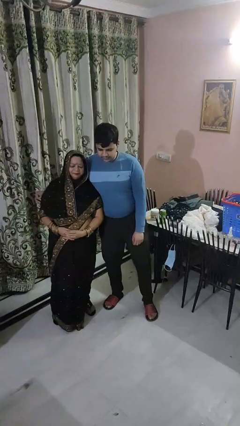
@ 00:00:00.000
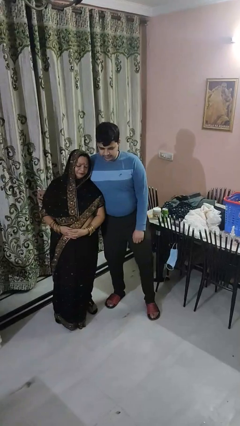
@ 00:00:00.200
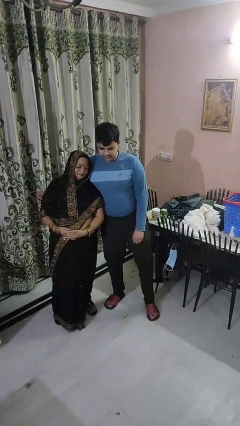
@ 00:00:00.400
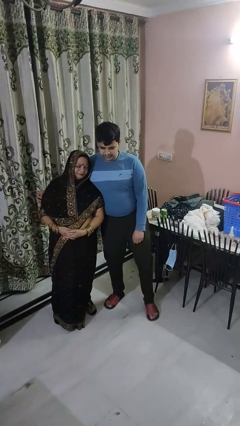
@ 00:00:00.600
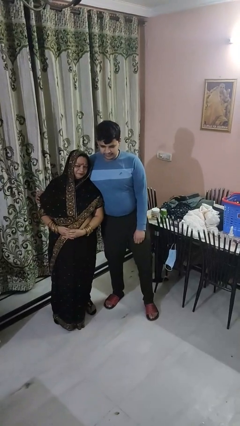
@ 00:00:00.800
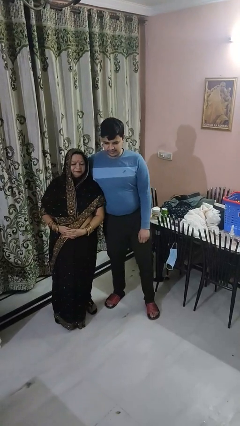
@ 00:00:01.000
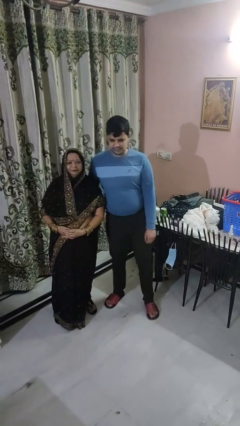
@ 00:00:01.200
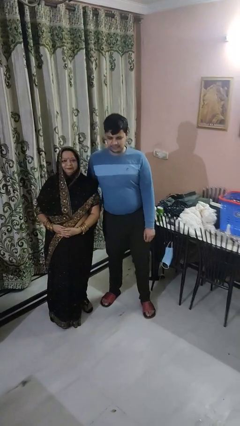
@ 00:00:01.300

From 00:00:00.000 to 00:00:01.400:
person hugs person from side

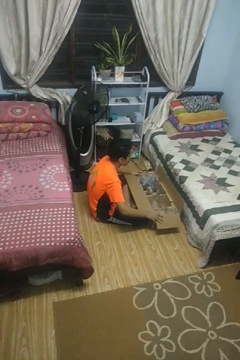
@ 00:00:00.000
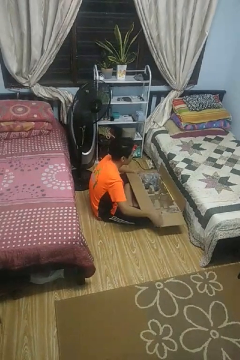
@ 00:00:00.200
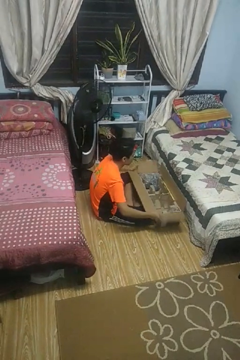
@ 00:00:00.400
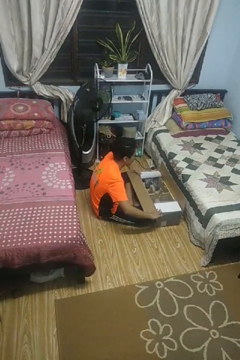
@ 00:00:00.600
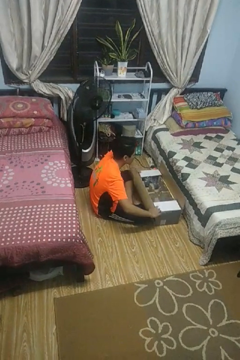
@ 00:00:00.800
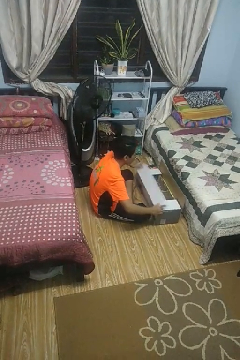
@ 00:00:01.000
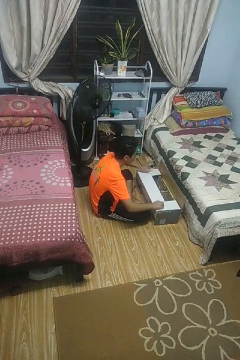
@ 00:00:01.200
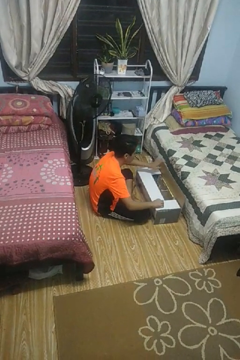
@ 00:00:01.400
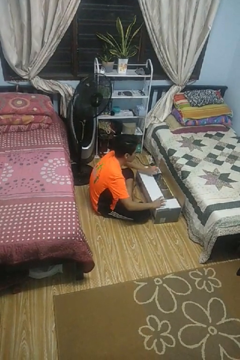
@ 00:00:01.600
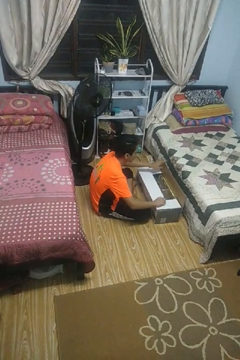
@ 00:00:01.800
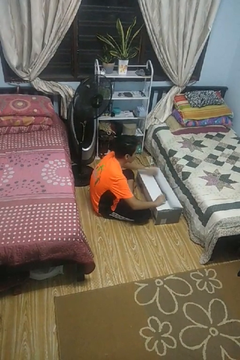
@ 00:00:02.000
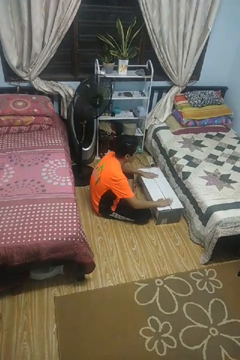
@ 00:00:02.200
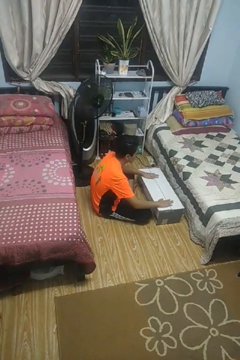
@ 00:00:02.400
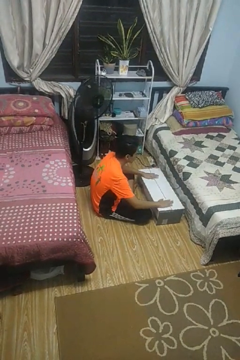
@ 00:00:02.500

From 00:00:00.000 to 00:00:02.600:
person closes box

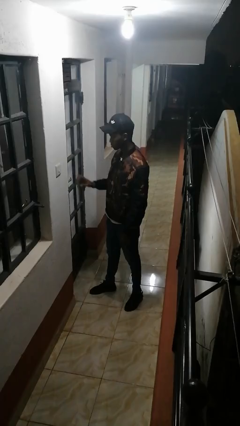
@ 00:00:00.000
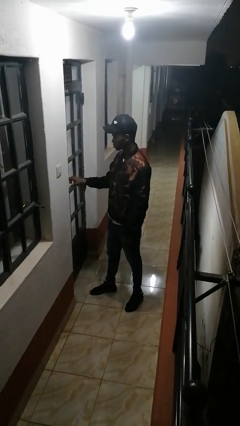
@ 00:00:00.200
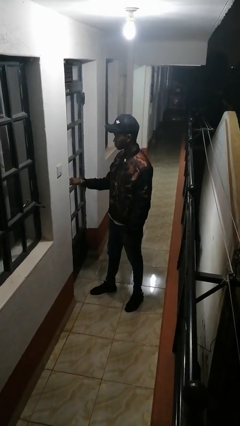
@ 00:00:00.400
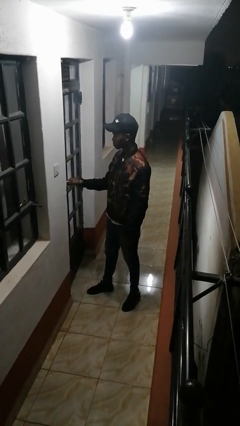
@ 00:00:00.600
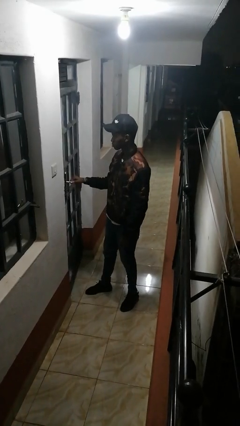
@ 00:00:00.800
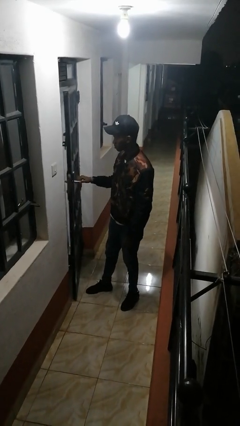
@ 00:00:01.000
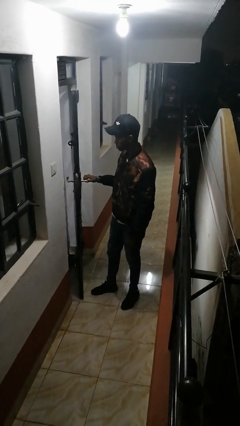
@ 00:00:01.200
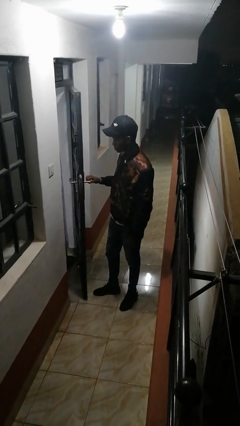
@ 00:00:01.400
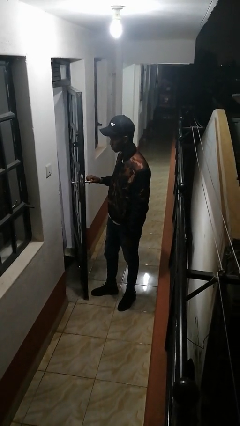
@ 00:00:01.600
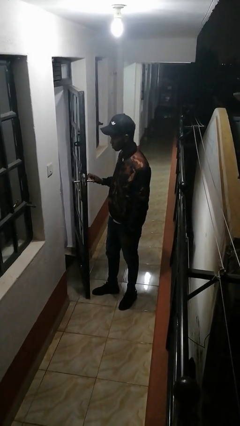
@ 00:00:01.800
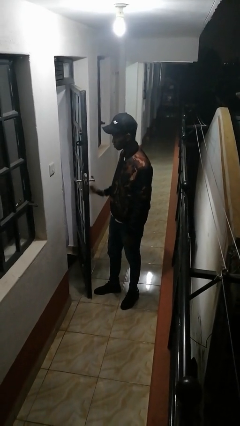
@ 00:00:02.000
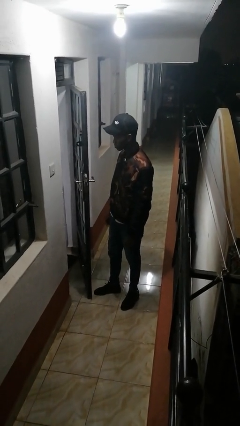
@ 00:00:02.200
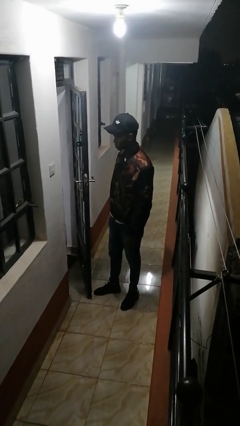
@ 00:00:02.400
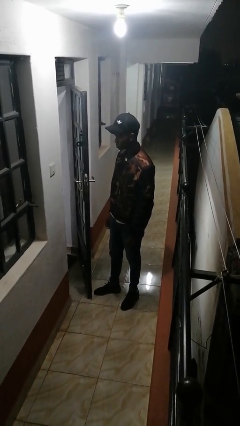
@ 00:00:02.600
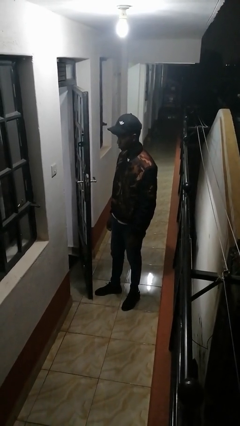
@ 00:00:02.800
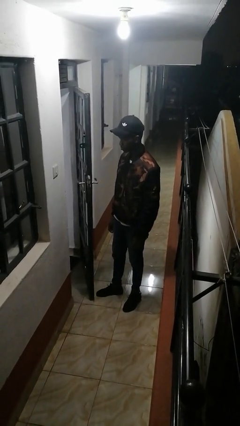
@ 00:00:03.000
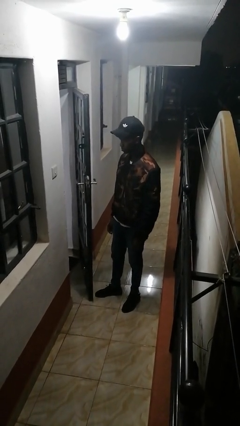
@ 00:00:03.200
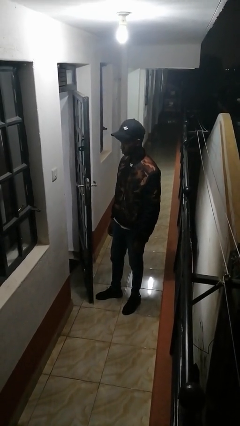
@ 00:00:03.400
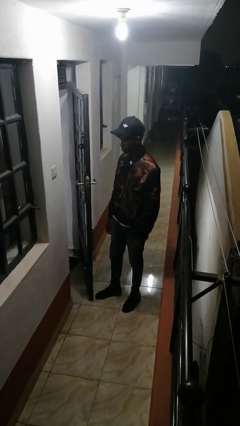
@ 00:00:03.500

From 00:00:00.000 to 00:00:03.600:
person opens facility door

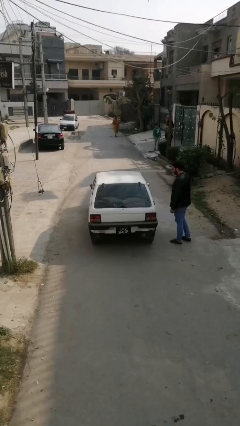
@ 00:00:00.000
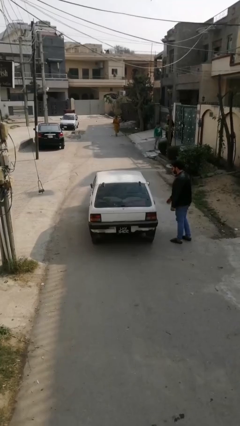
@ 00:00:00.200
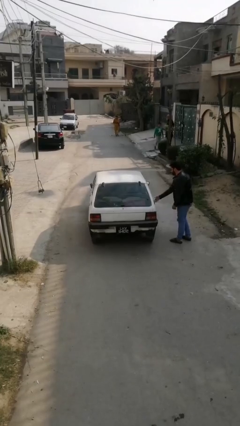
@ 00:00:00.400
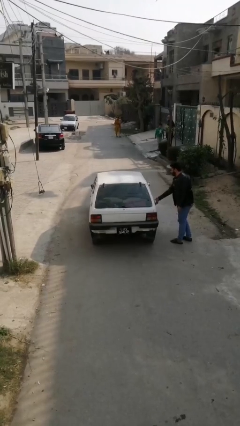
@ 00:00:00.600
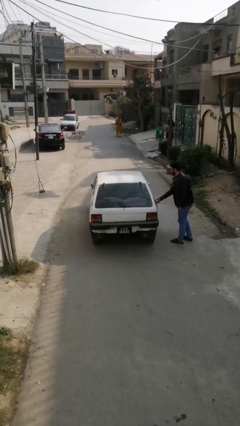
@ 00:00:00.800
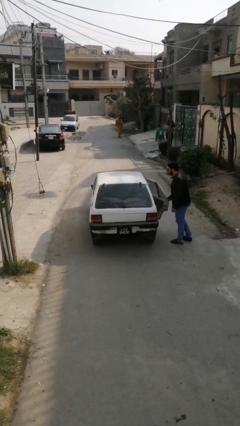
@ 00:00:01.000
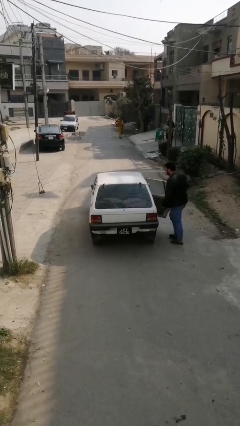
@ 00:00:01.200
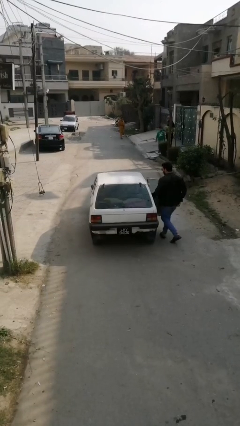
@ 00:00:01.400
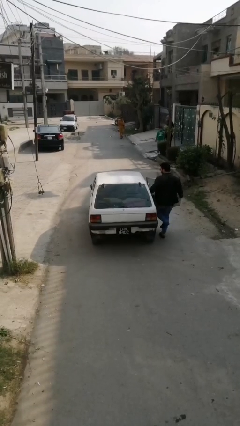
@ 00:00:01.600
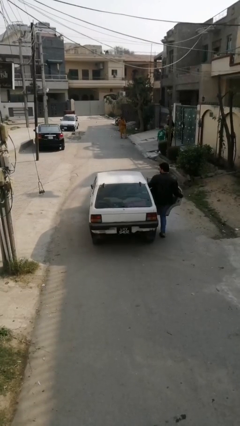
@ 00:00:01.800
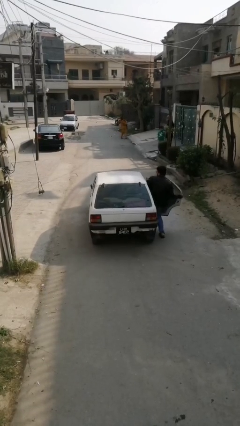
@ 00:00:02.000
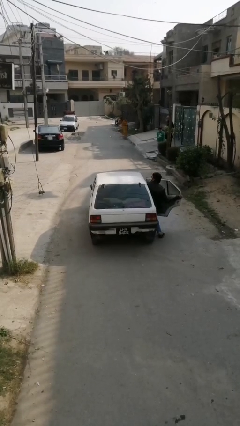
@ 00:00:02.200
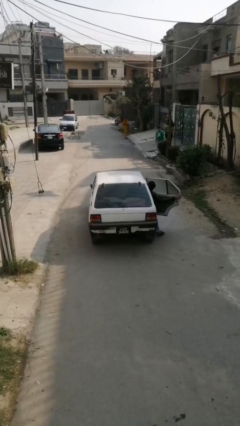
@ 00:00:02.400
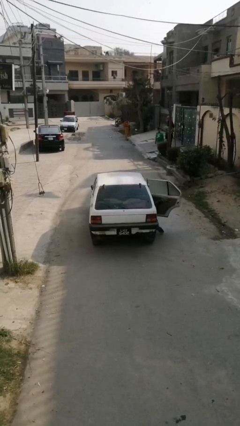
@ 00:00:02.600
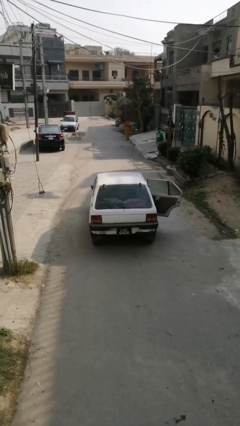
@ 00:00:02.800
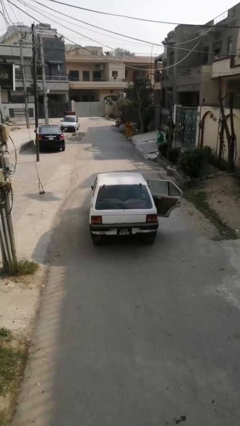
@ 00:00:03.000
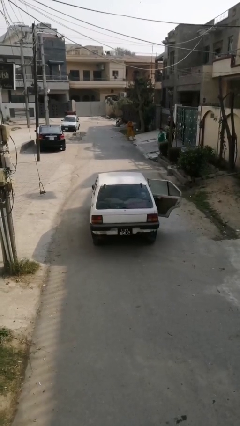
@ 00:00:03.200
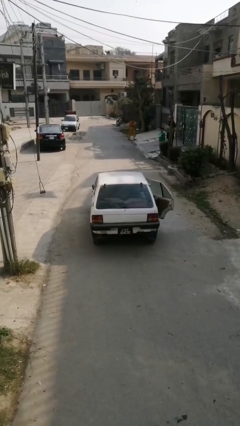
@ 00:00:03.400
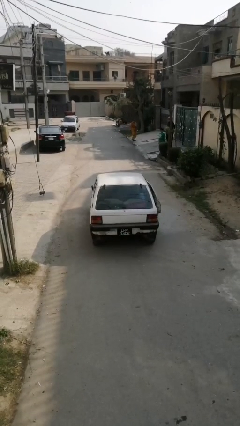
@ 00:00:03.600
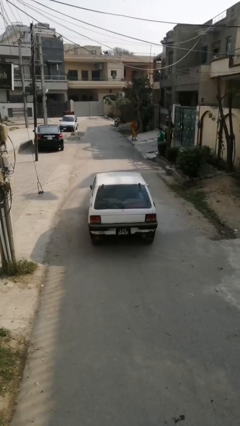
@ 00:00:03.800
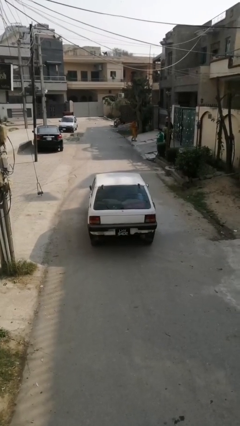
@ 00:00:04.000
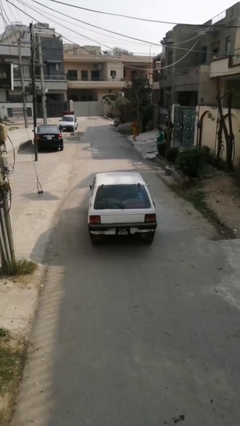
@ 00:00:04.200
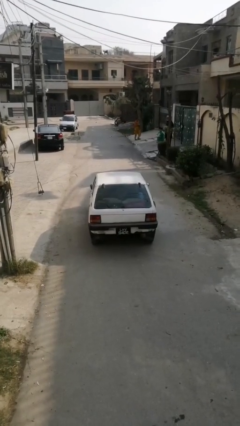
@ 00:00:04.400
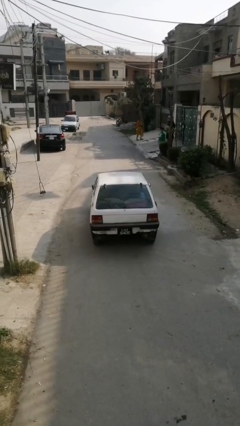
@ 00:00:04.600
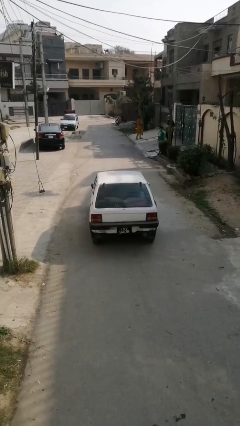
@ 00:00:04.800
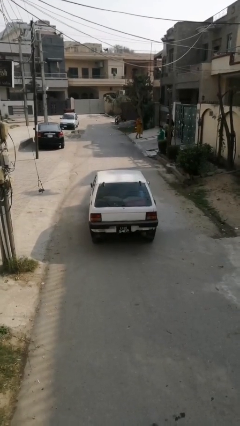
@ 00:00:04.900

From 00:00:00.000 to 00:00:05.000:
car picks up person

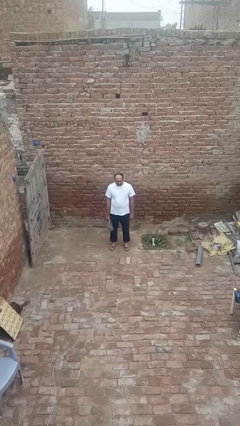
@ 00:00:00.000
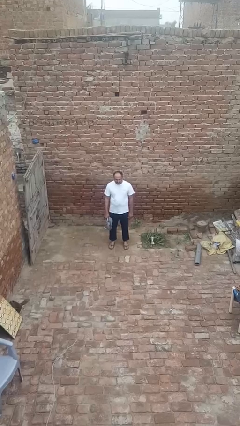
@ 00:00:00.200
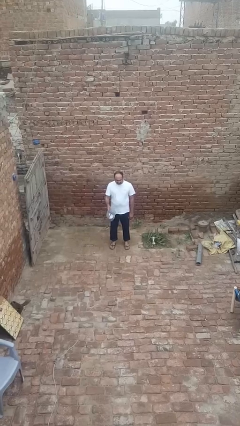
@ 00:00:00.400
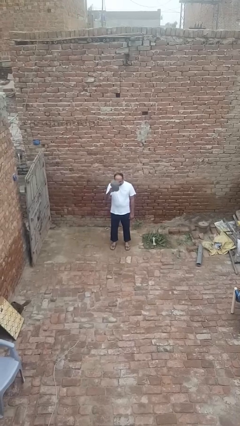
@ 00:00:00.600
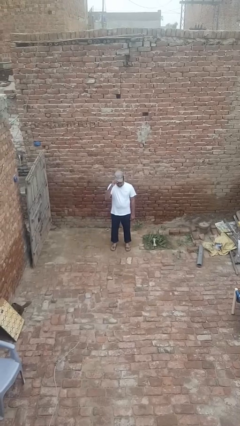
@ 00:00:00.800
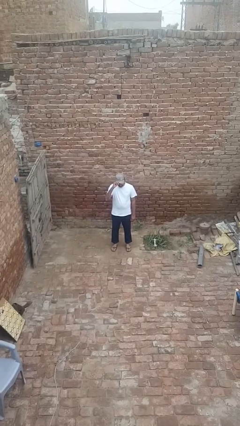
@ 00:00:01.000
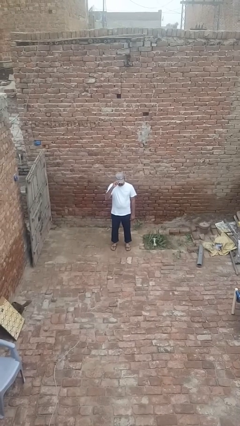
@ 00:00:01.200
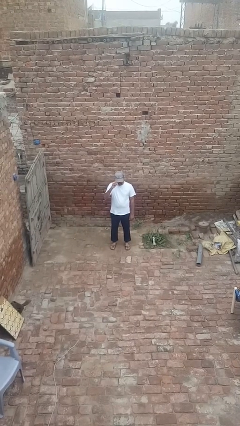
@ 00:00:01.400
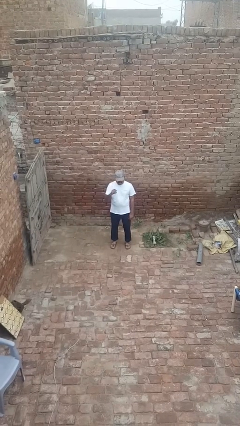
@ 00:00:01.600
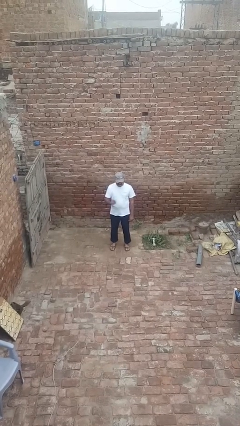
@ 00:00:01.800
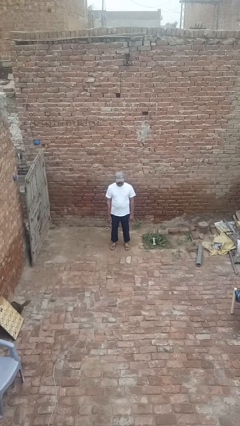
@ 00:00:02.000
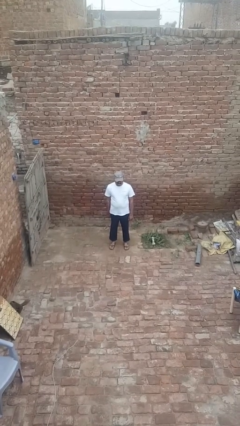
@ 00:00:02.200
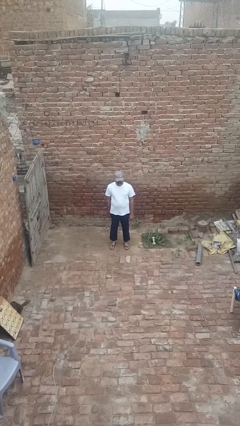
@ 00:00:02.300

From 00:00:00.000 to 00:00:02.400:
person puts on hat

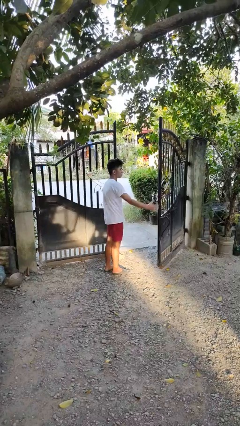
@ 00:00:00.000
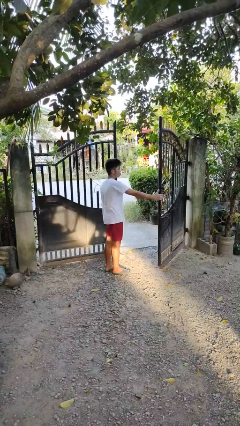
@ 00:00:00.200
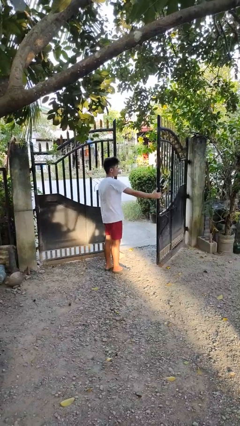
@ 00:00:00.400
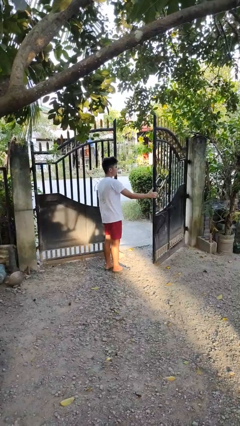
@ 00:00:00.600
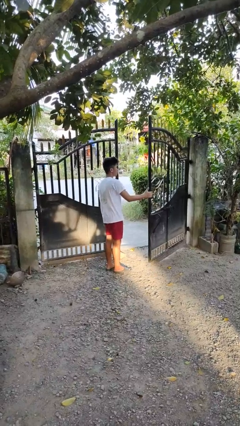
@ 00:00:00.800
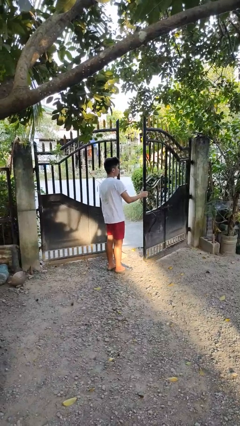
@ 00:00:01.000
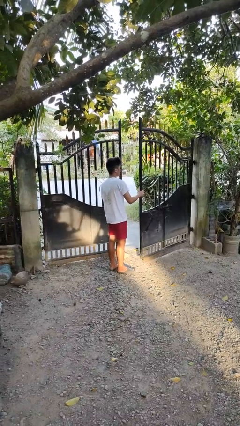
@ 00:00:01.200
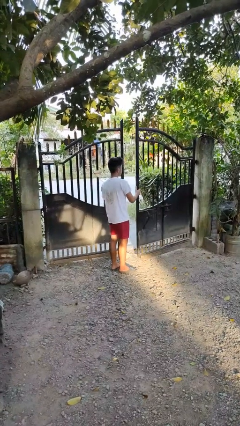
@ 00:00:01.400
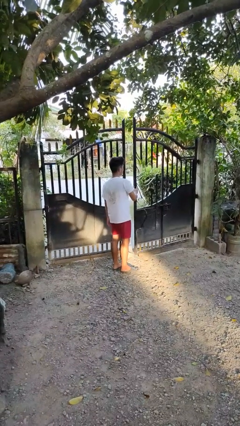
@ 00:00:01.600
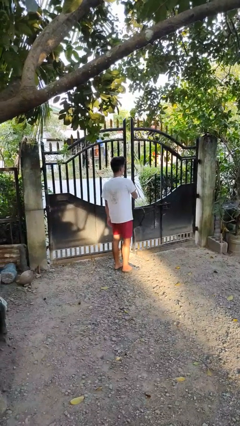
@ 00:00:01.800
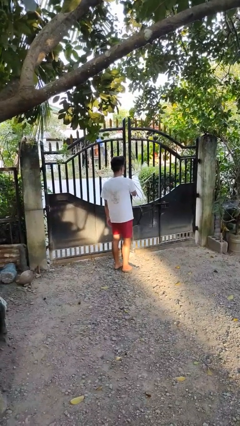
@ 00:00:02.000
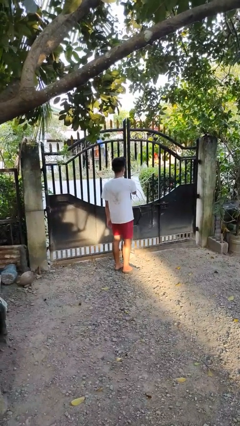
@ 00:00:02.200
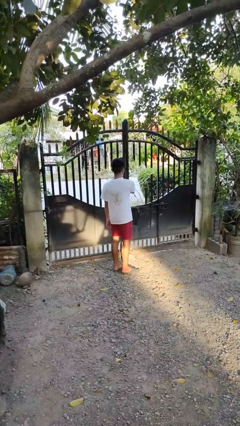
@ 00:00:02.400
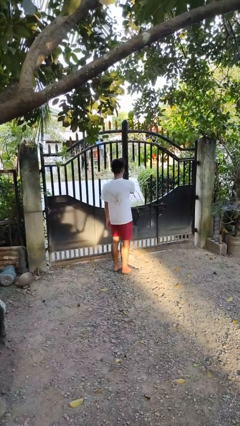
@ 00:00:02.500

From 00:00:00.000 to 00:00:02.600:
person closes gate
